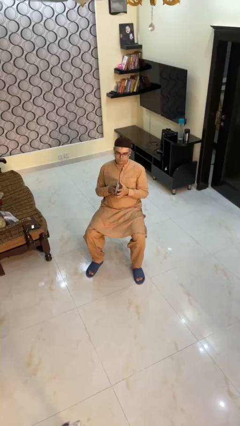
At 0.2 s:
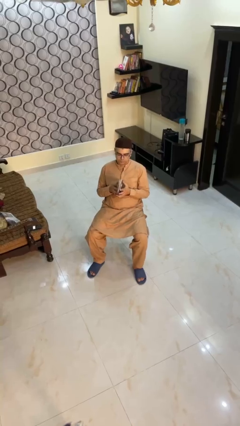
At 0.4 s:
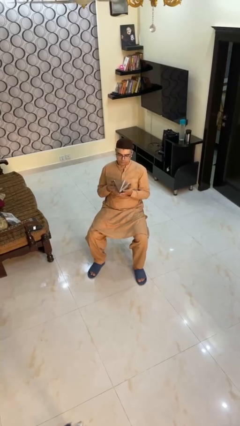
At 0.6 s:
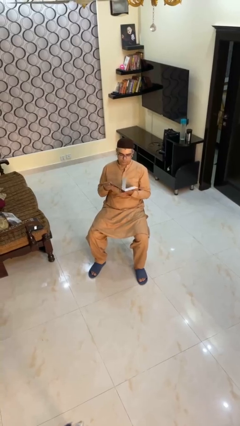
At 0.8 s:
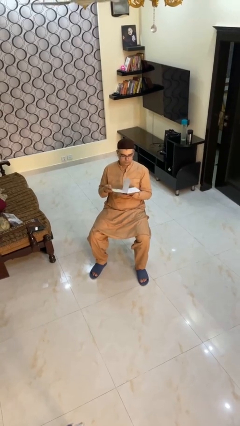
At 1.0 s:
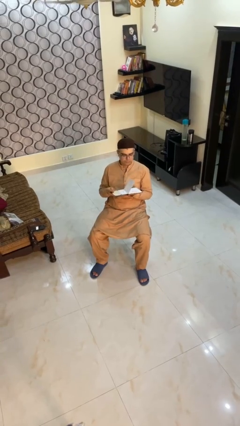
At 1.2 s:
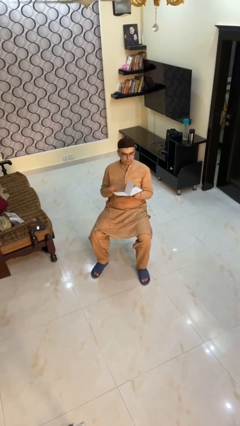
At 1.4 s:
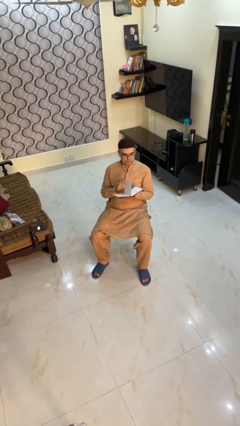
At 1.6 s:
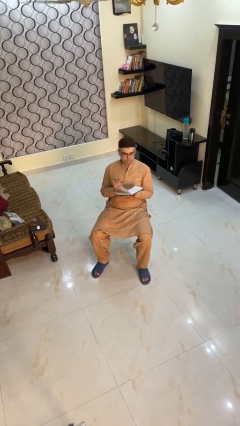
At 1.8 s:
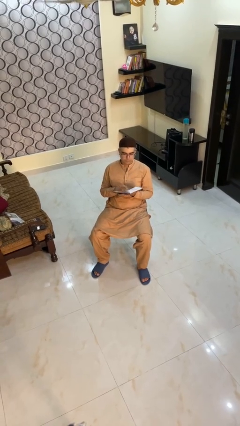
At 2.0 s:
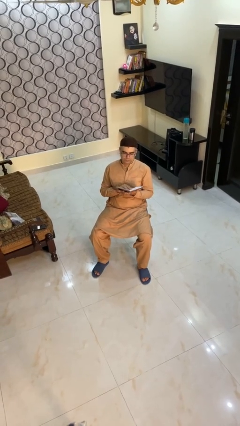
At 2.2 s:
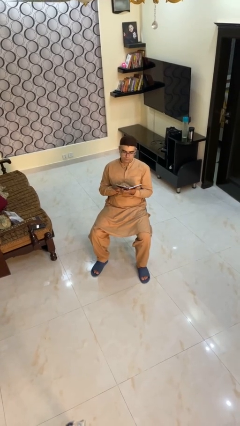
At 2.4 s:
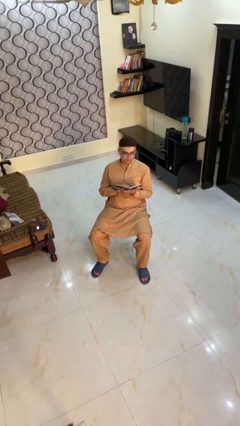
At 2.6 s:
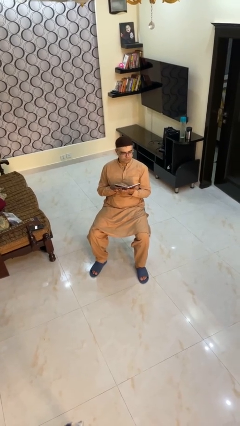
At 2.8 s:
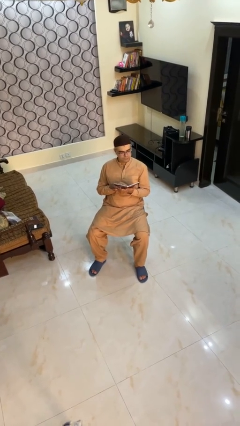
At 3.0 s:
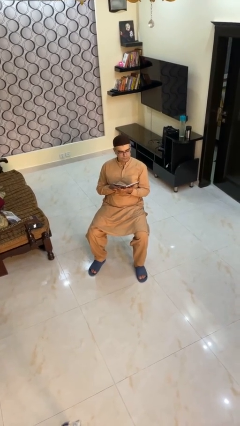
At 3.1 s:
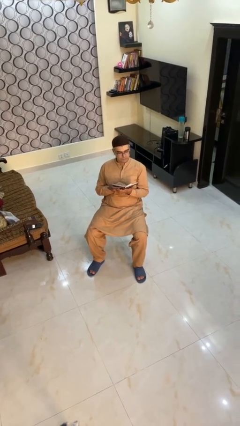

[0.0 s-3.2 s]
person reads book

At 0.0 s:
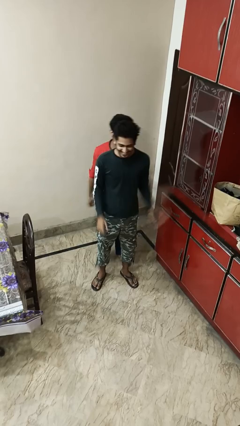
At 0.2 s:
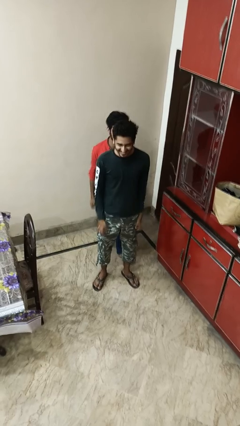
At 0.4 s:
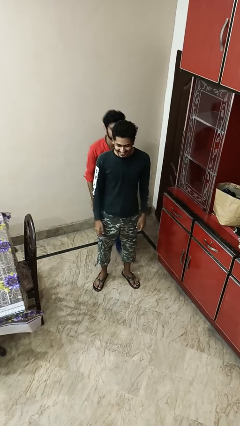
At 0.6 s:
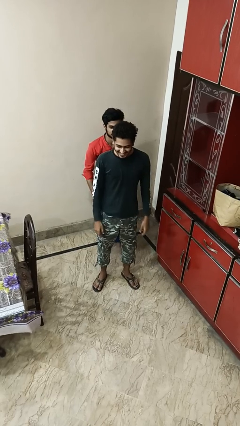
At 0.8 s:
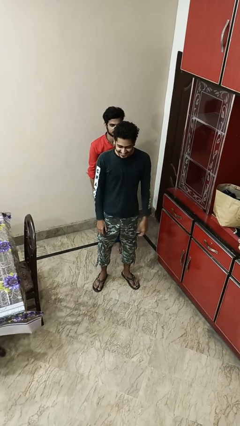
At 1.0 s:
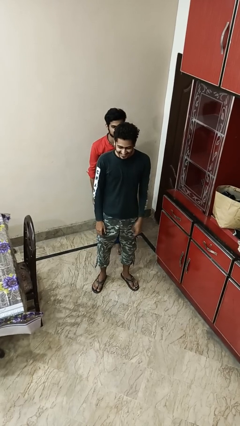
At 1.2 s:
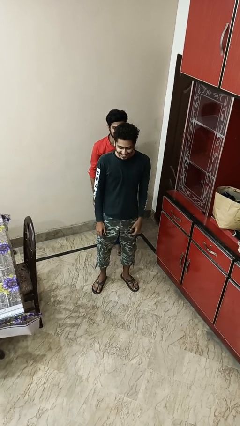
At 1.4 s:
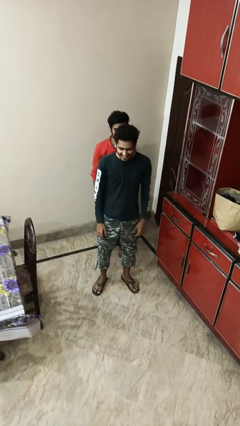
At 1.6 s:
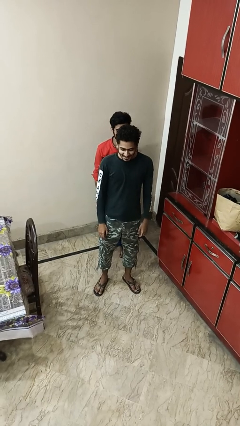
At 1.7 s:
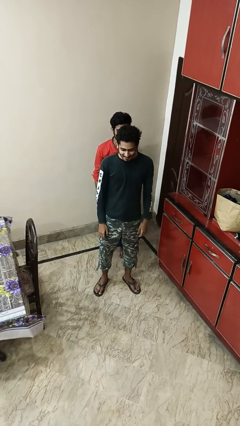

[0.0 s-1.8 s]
person puts down person

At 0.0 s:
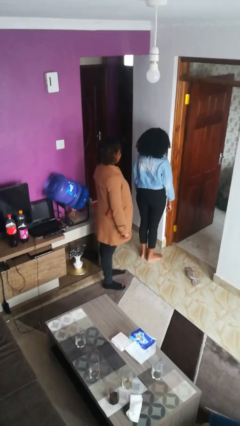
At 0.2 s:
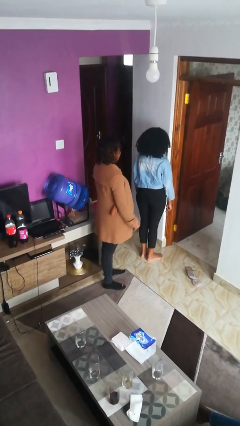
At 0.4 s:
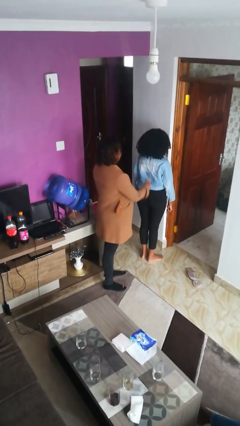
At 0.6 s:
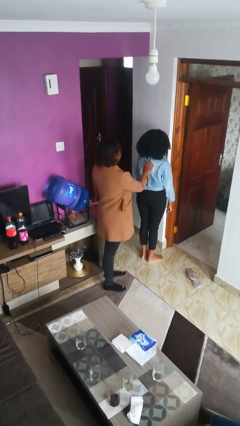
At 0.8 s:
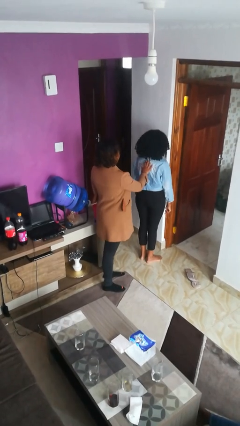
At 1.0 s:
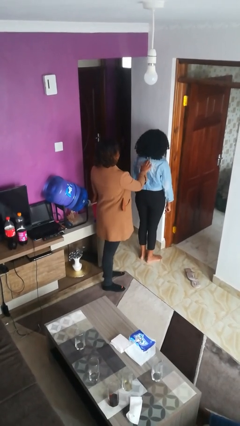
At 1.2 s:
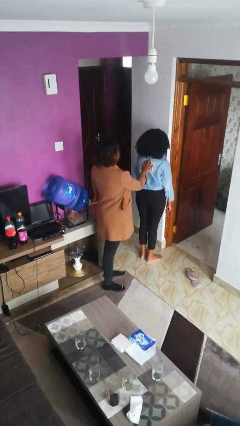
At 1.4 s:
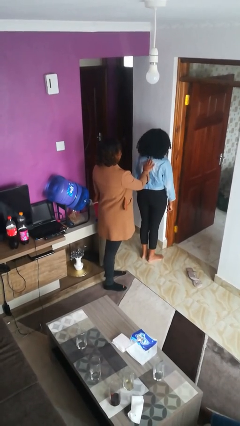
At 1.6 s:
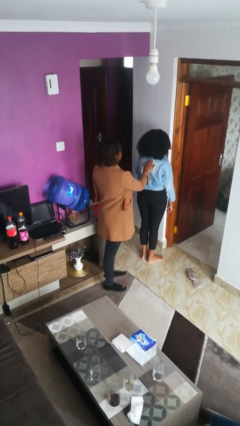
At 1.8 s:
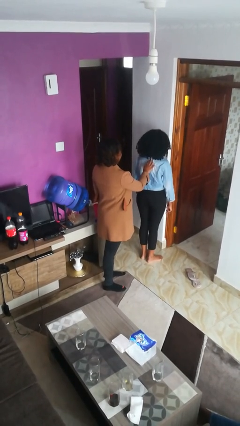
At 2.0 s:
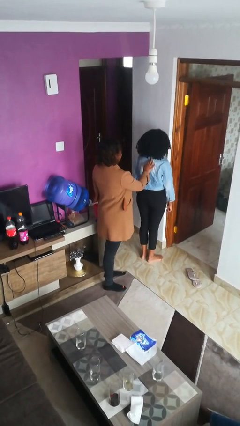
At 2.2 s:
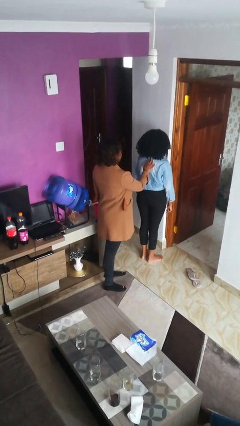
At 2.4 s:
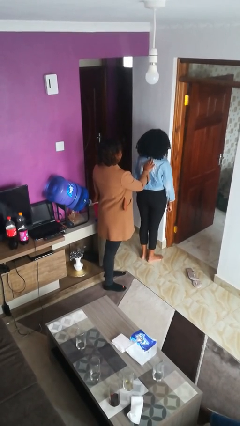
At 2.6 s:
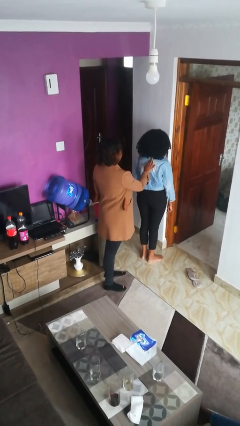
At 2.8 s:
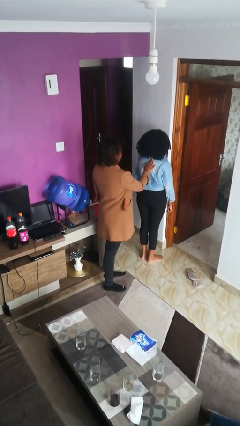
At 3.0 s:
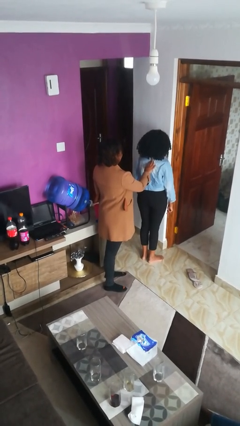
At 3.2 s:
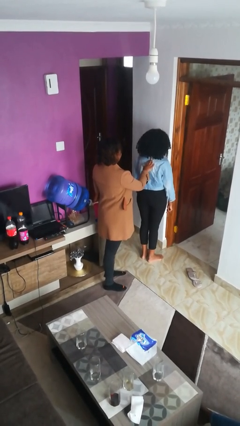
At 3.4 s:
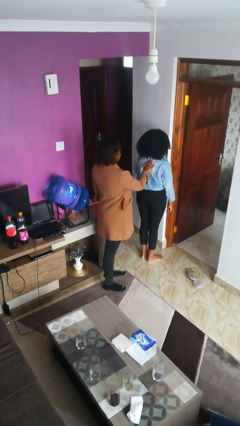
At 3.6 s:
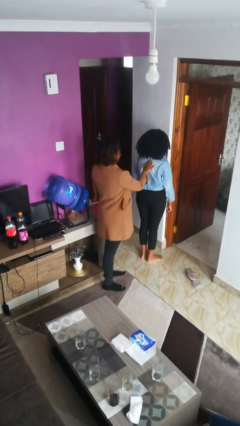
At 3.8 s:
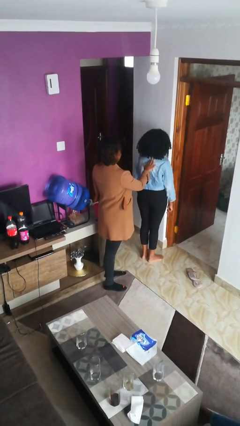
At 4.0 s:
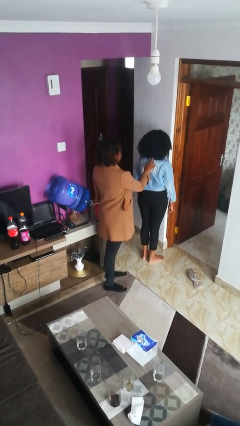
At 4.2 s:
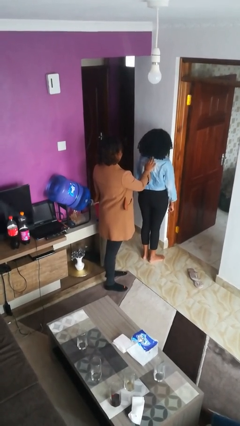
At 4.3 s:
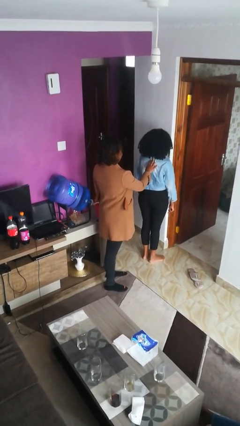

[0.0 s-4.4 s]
person touches back of person

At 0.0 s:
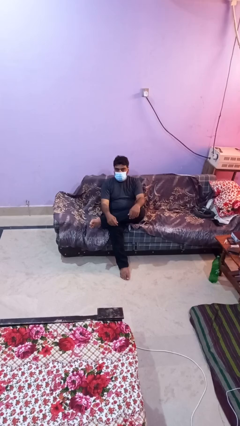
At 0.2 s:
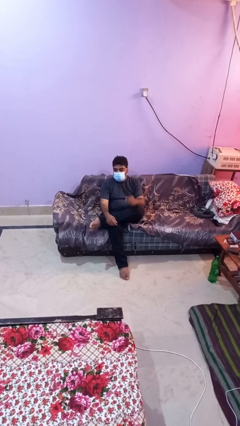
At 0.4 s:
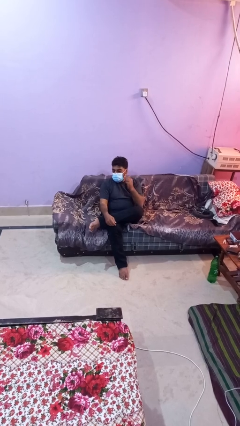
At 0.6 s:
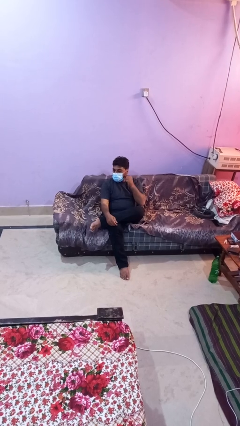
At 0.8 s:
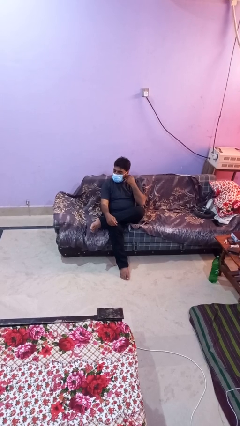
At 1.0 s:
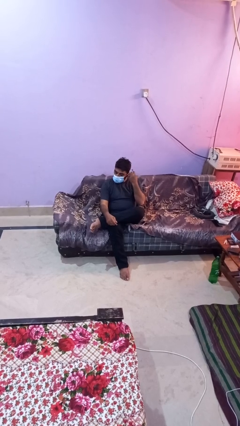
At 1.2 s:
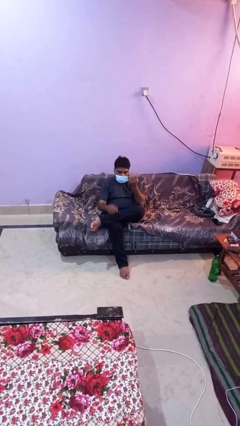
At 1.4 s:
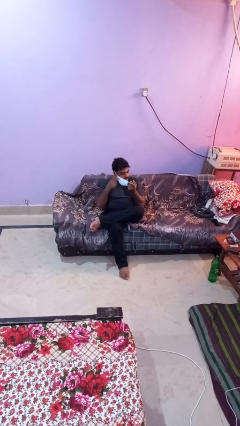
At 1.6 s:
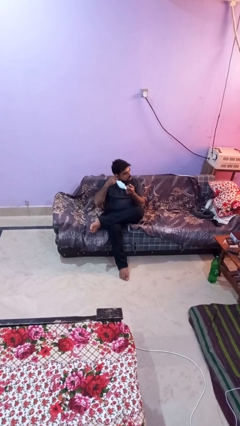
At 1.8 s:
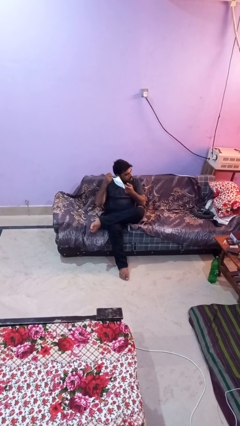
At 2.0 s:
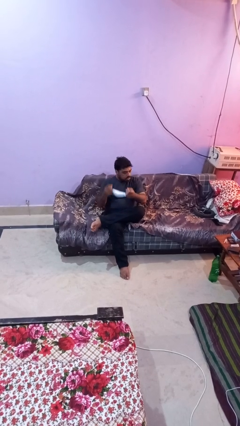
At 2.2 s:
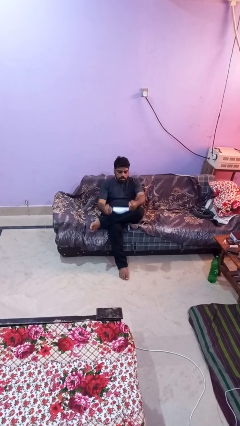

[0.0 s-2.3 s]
person takes off facemask

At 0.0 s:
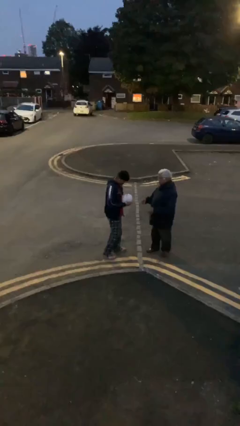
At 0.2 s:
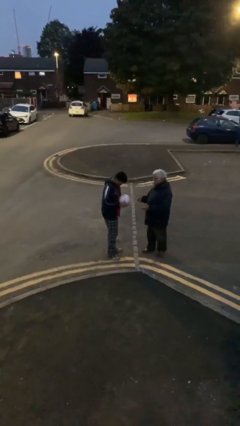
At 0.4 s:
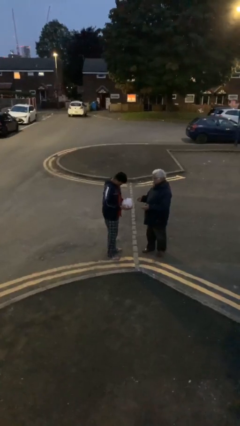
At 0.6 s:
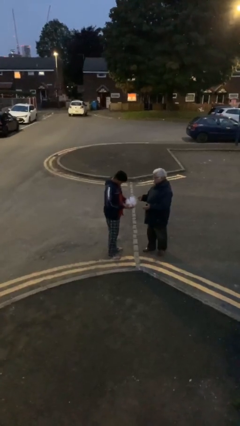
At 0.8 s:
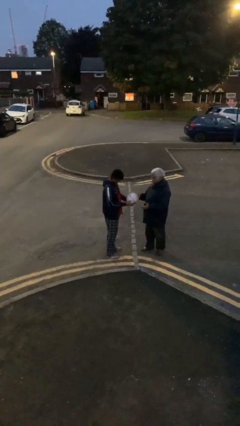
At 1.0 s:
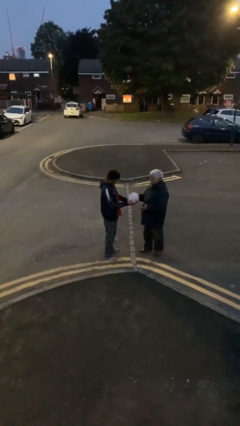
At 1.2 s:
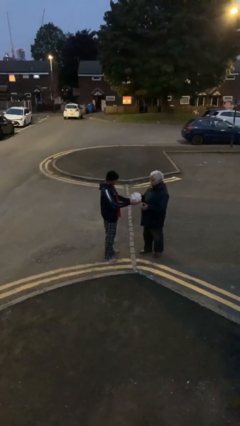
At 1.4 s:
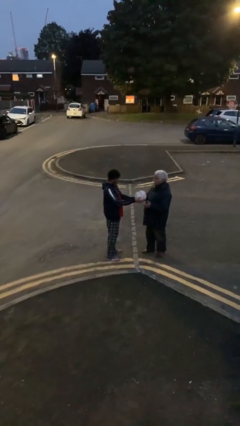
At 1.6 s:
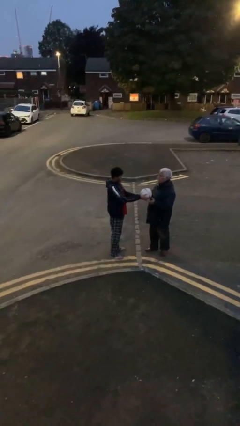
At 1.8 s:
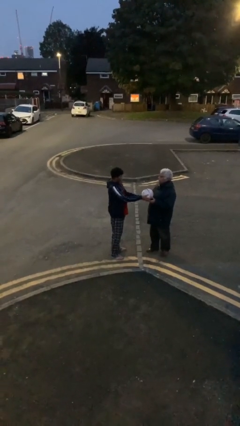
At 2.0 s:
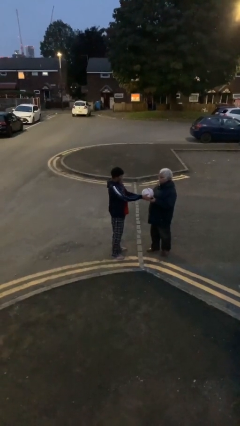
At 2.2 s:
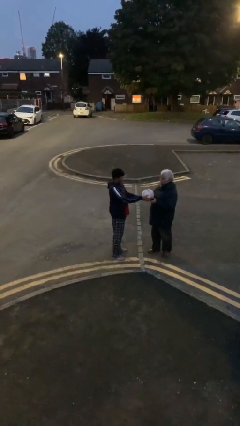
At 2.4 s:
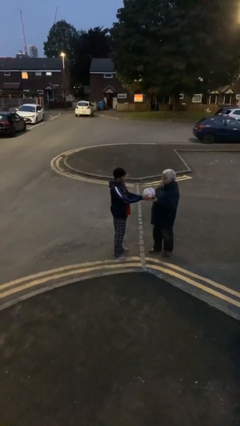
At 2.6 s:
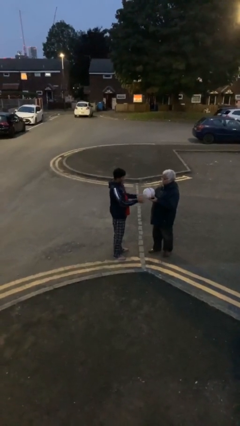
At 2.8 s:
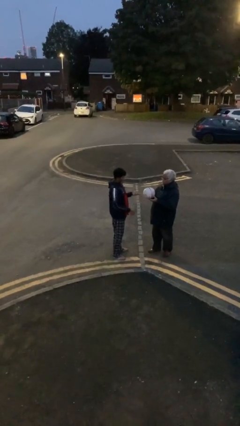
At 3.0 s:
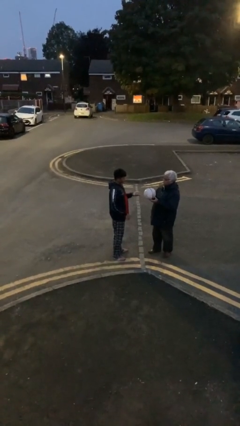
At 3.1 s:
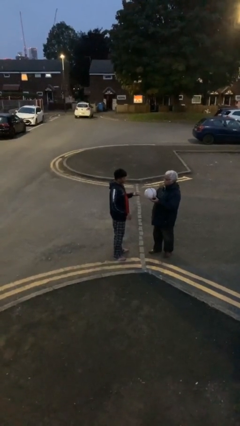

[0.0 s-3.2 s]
person transfers object to person

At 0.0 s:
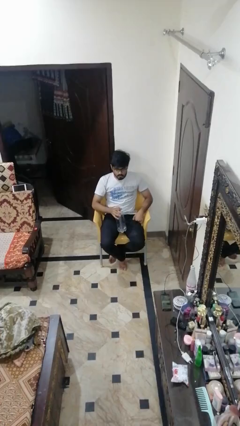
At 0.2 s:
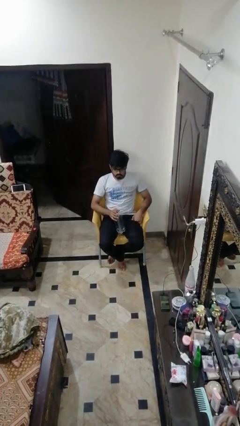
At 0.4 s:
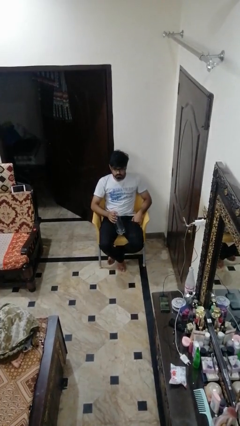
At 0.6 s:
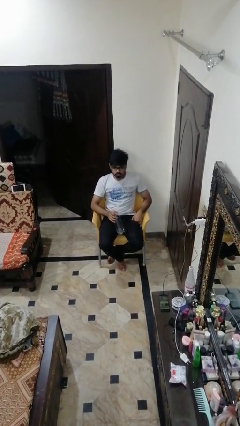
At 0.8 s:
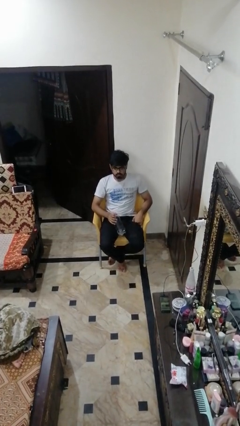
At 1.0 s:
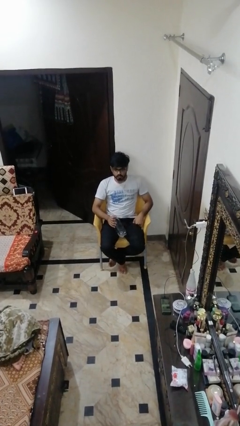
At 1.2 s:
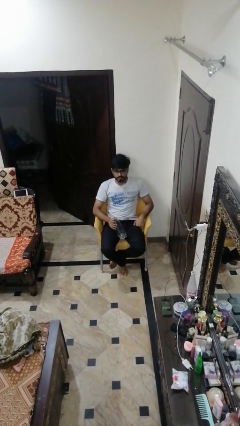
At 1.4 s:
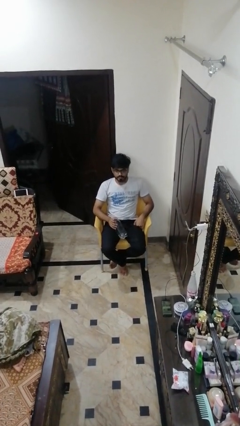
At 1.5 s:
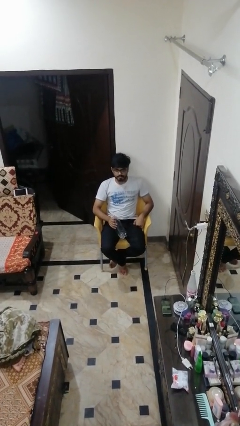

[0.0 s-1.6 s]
person drops object

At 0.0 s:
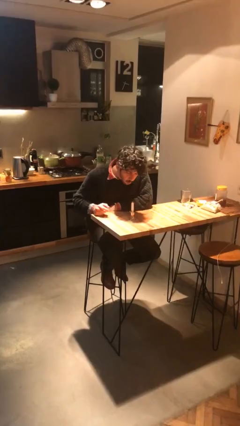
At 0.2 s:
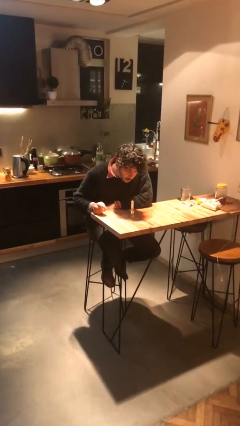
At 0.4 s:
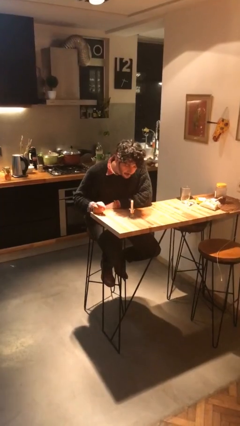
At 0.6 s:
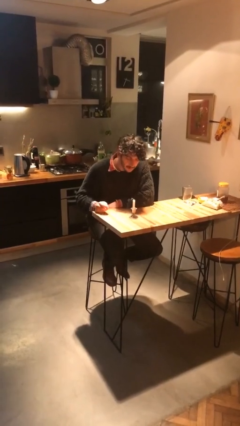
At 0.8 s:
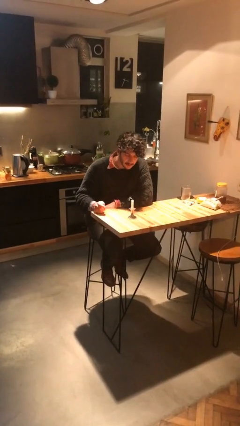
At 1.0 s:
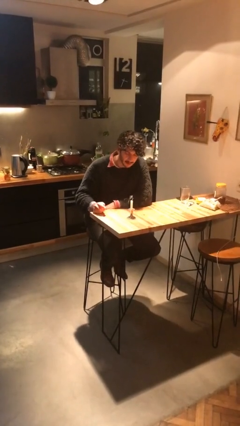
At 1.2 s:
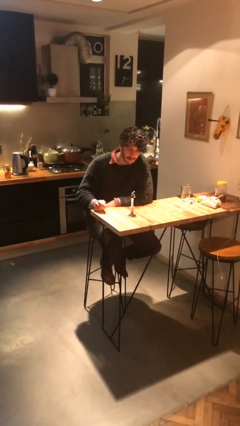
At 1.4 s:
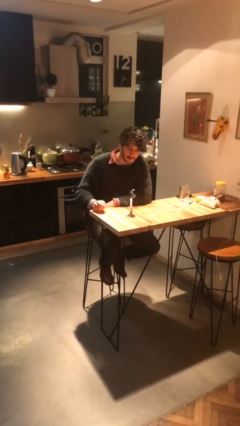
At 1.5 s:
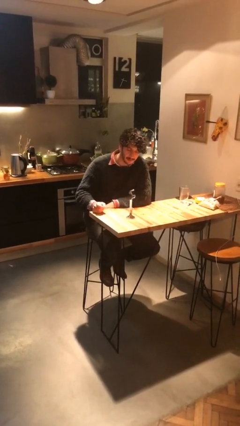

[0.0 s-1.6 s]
person extinguishes candle
